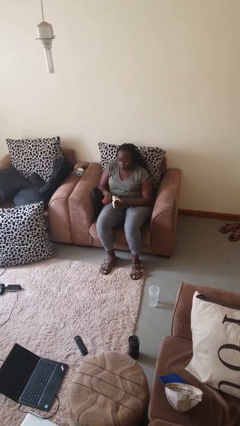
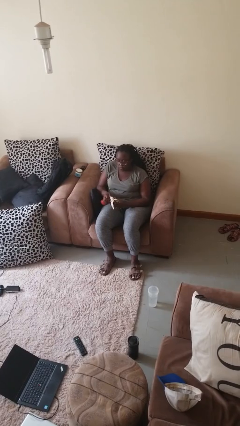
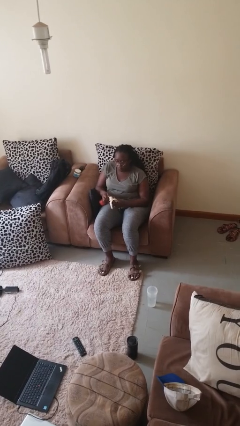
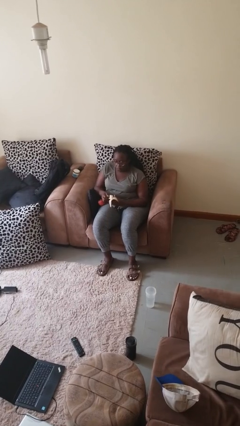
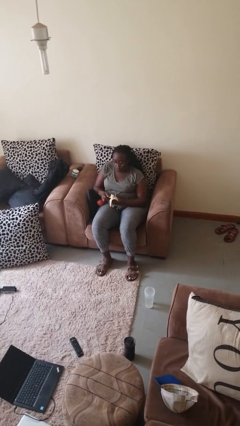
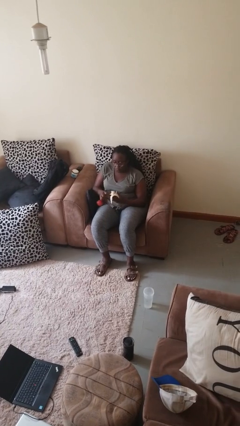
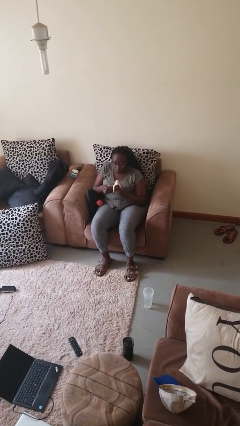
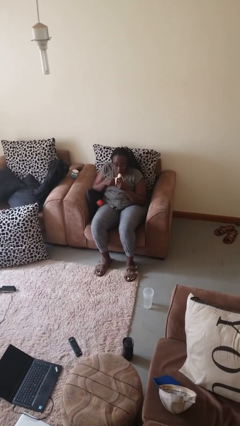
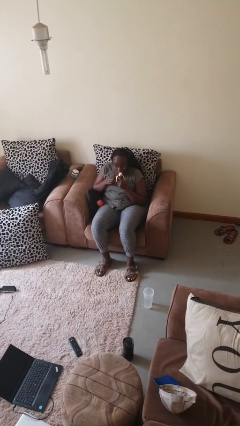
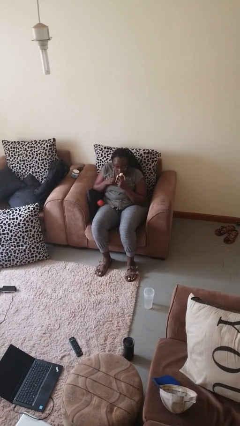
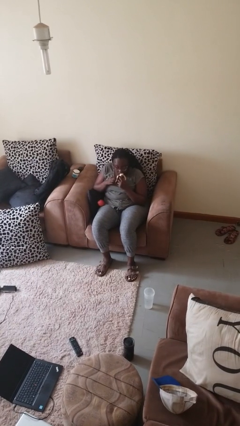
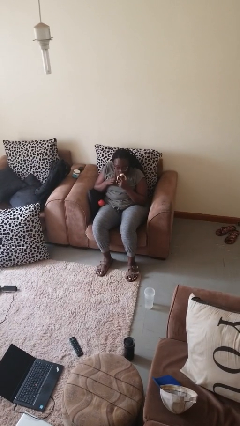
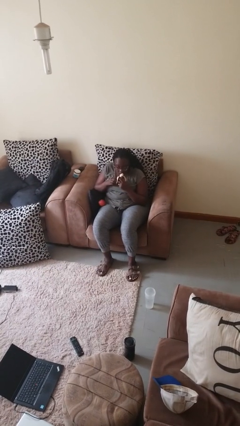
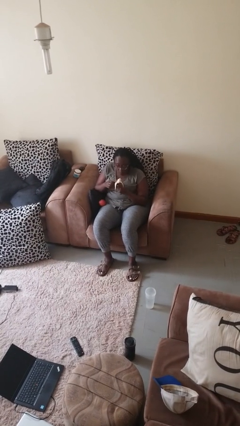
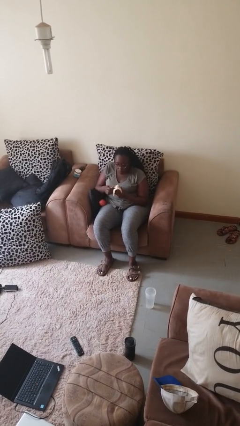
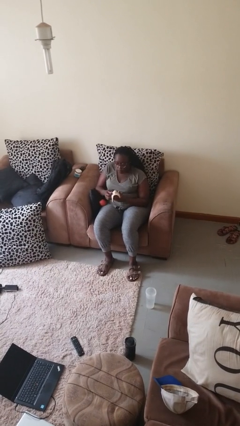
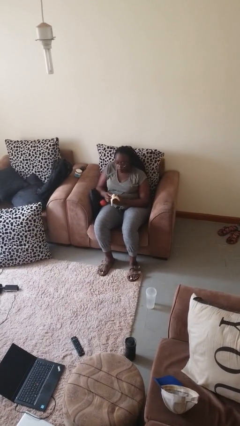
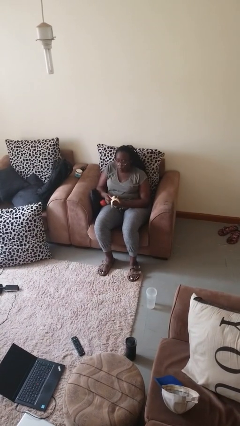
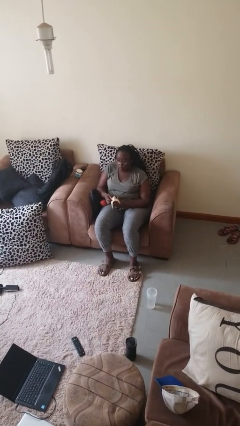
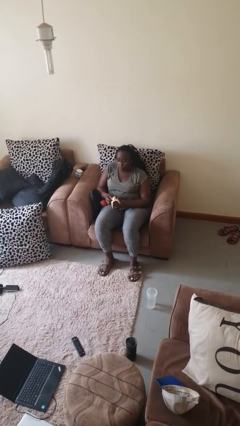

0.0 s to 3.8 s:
person eats banana

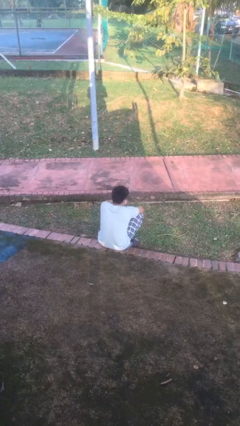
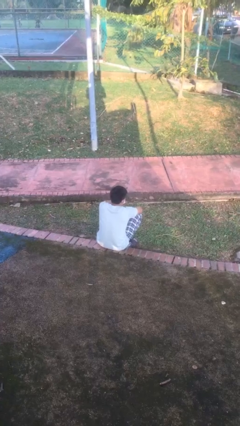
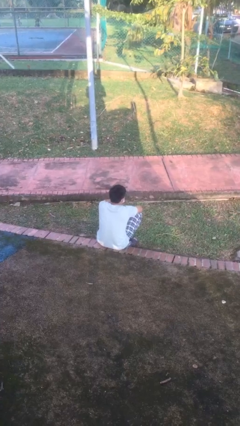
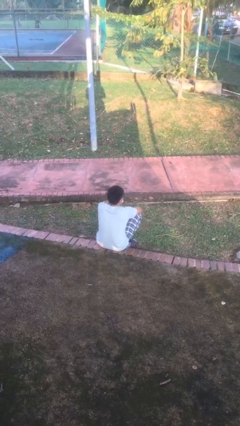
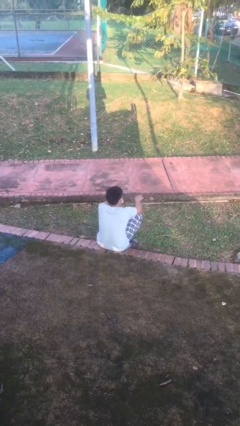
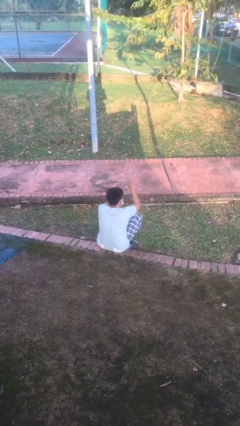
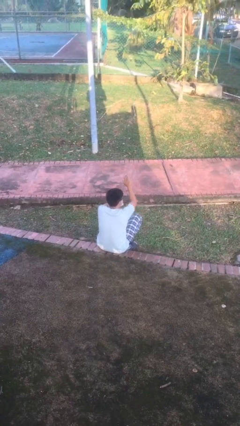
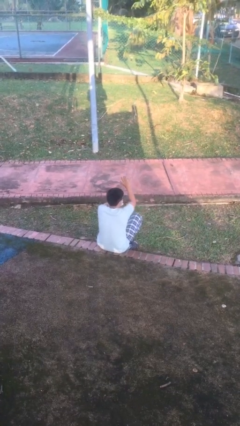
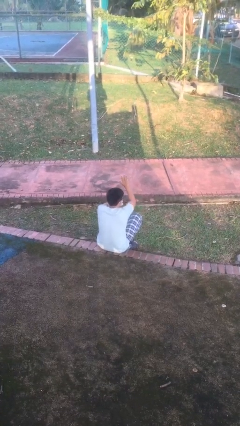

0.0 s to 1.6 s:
person gestures stop

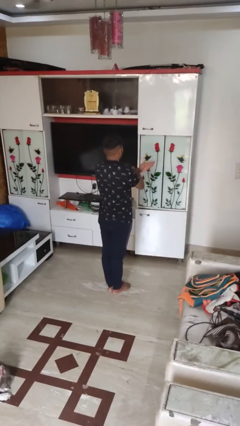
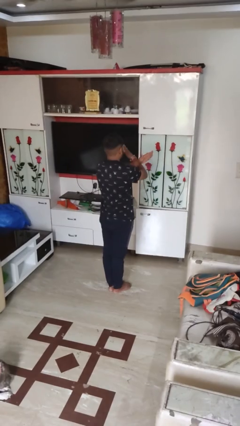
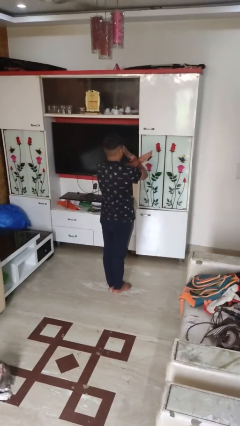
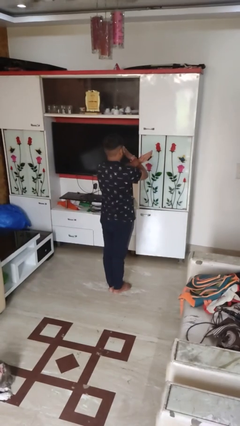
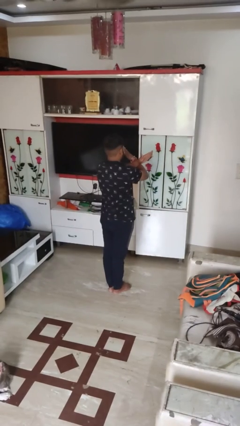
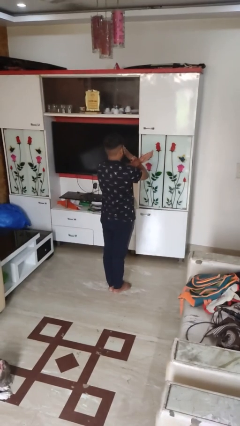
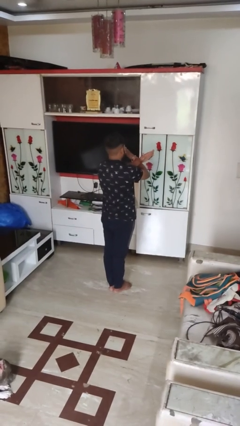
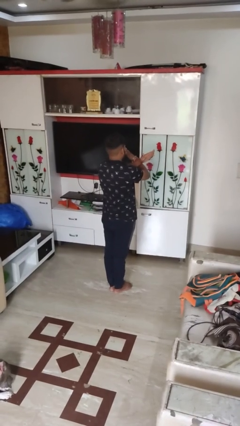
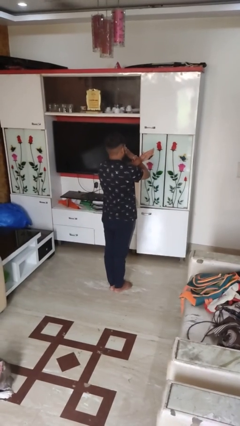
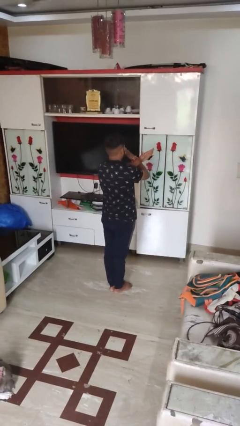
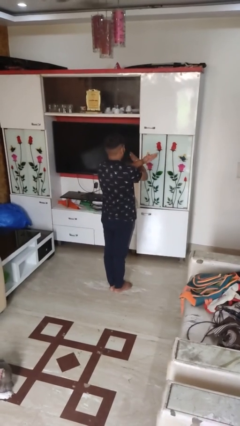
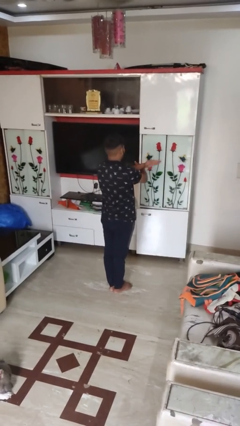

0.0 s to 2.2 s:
person gestures arms x

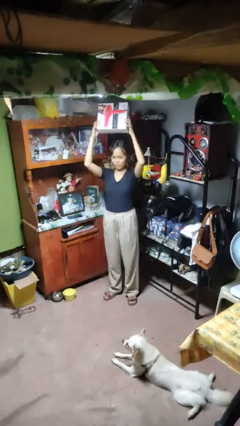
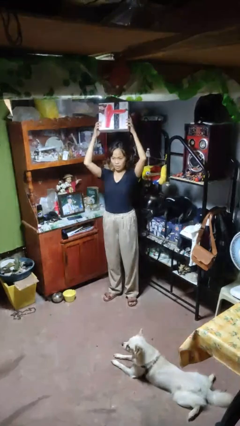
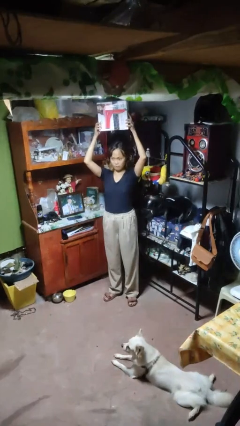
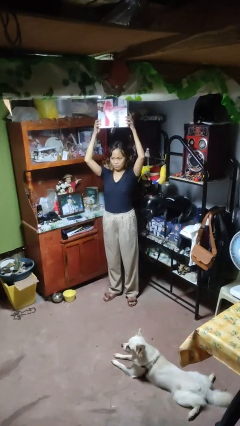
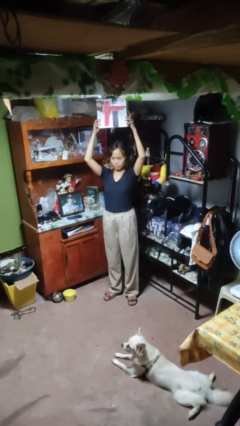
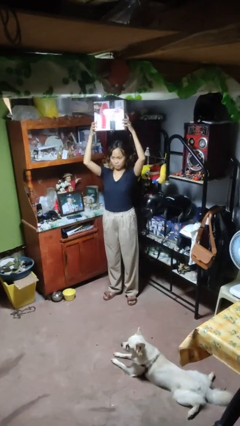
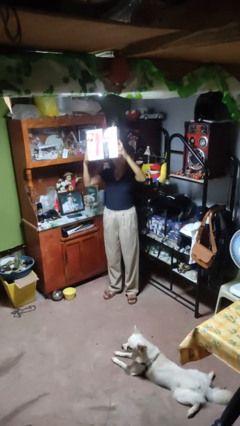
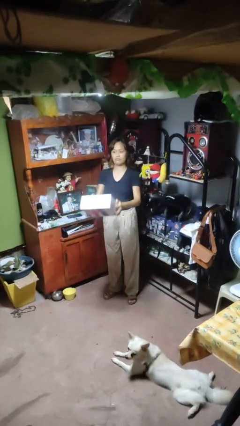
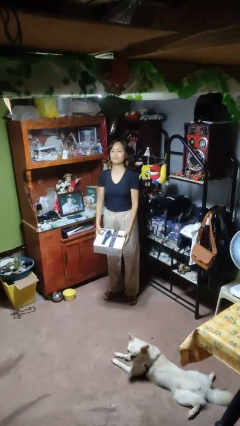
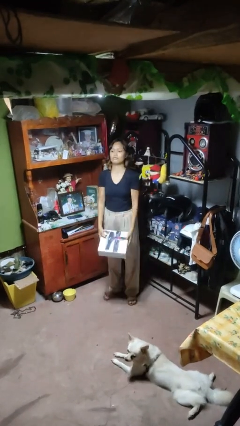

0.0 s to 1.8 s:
person holds object above head

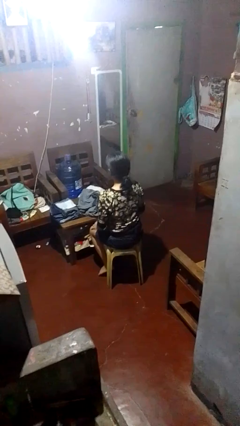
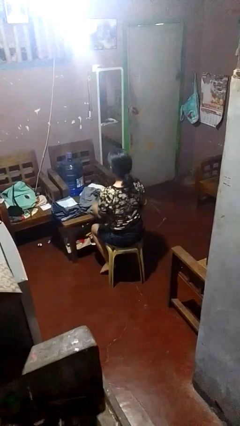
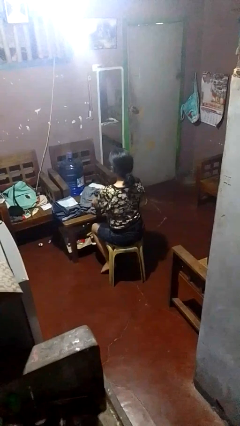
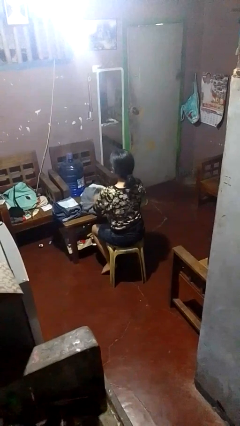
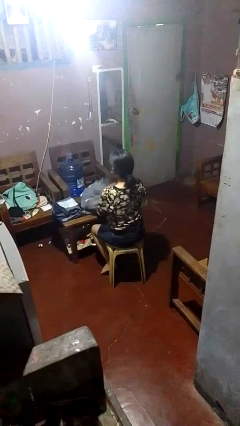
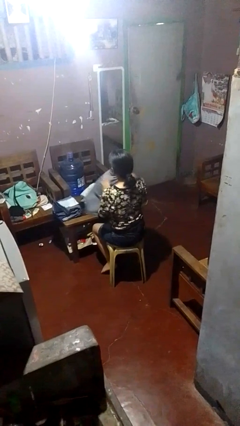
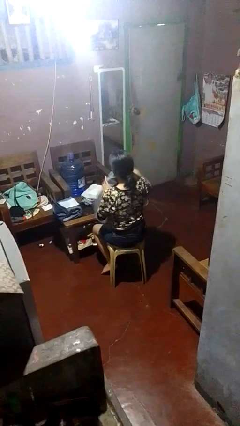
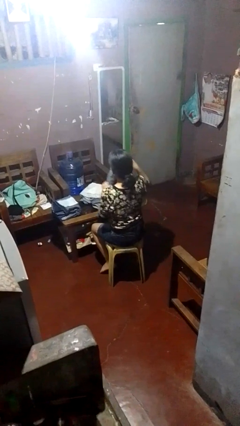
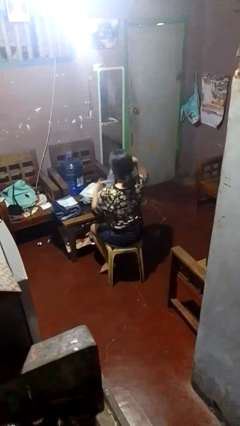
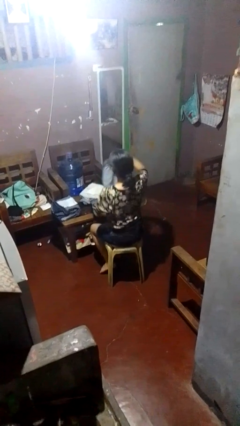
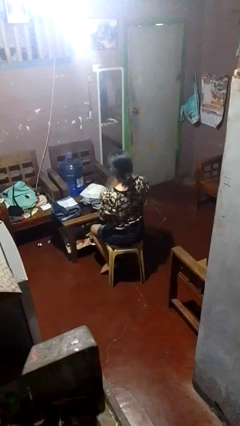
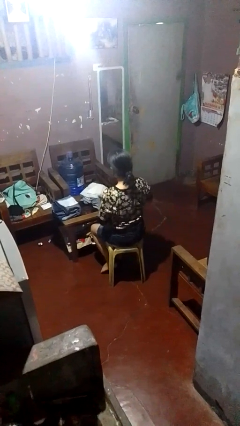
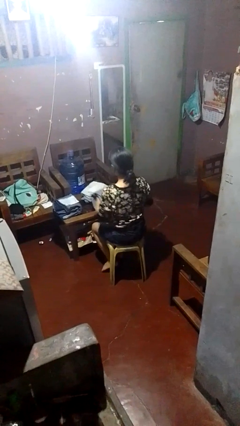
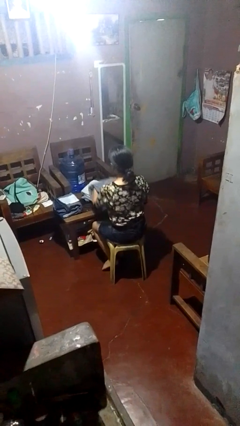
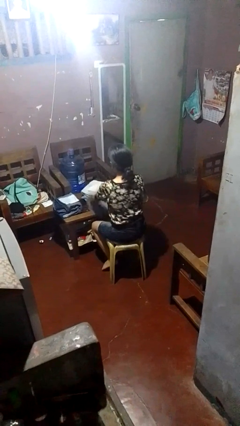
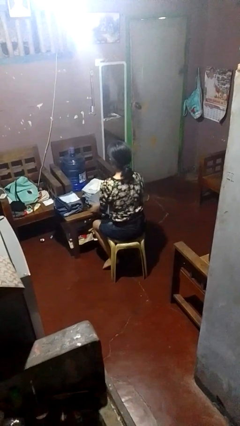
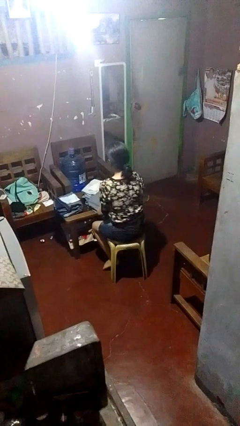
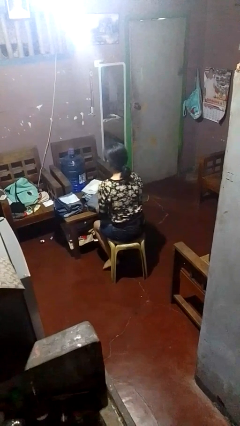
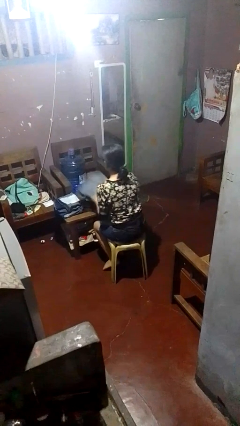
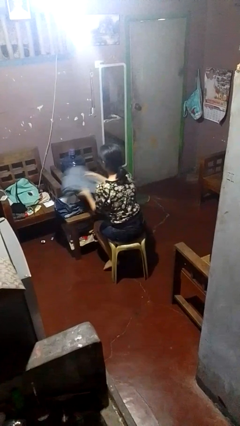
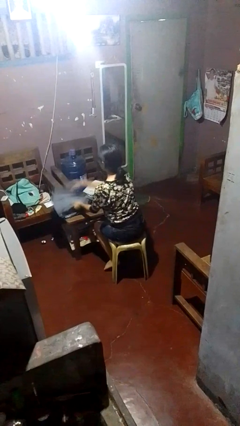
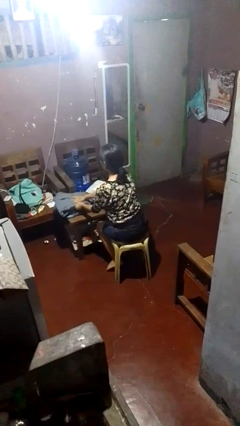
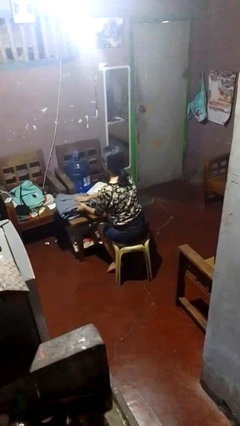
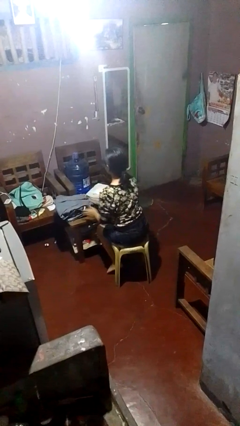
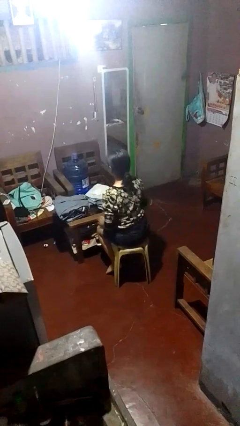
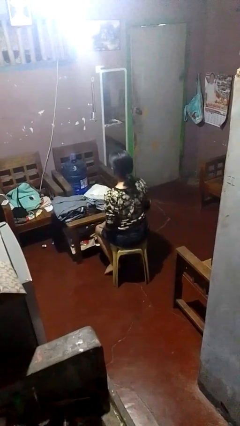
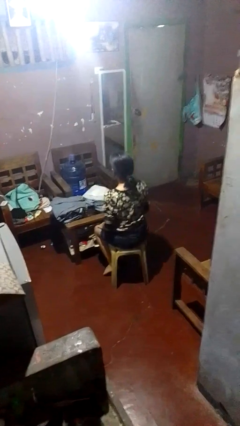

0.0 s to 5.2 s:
person folds pants

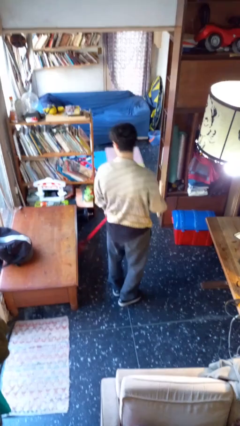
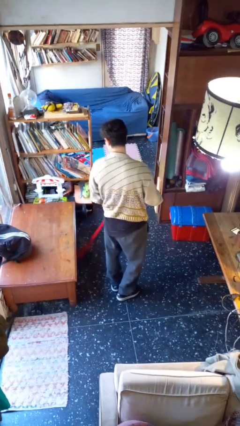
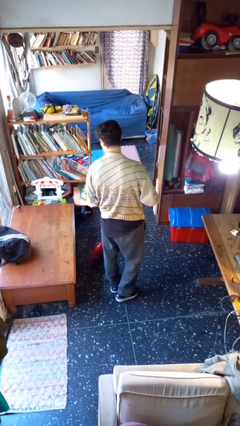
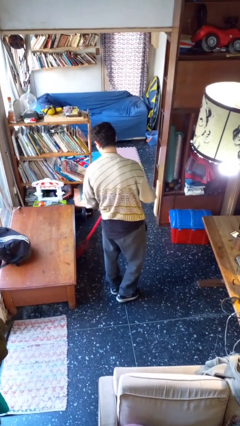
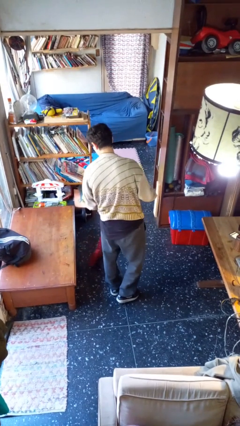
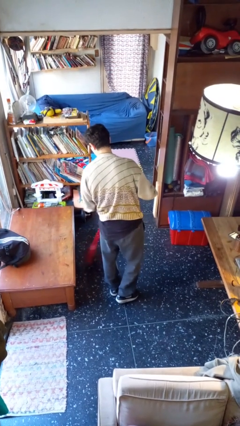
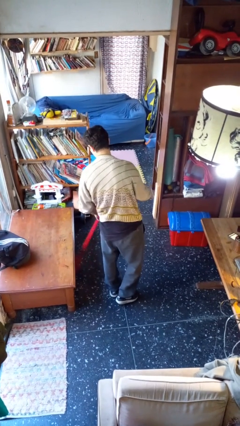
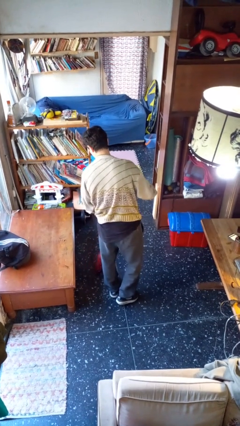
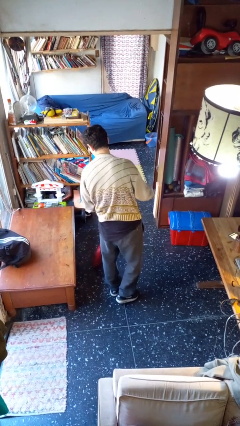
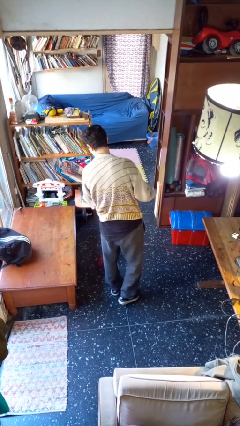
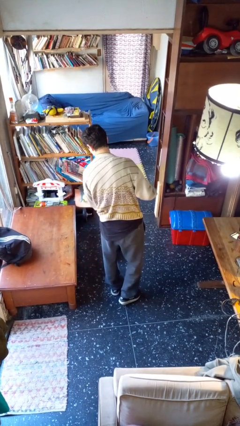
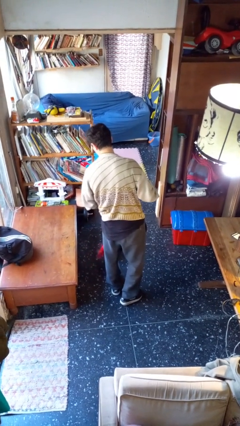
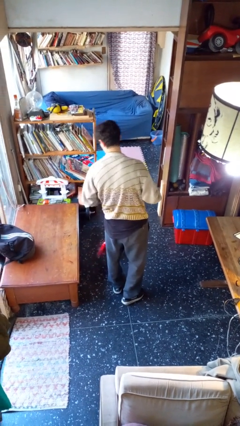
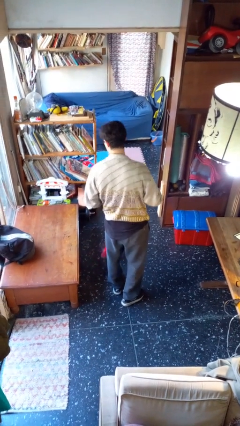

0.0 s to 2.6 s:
person sweeps floor

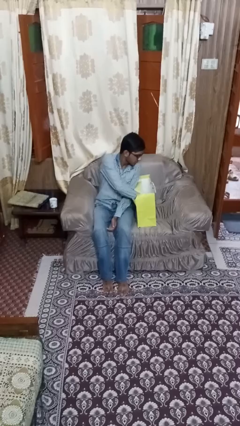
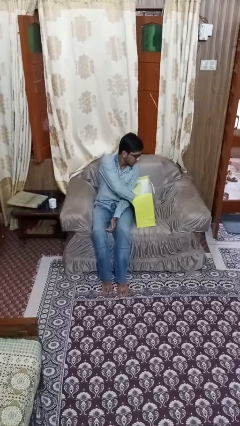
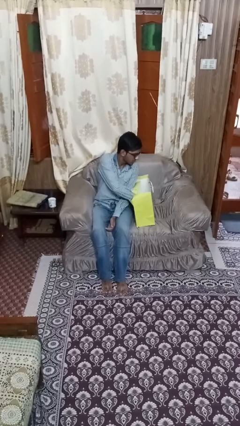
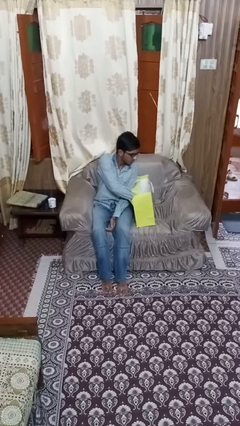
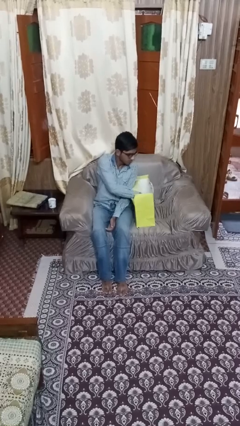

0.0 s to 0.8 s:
person searches in bag
